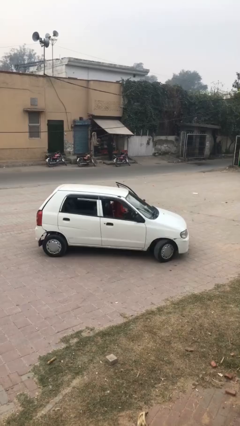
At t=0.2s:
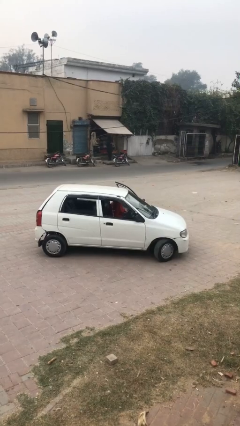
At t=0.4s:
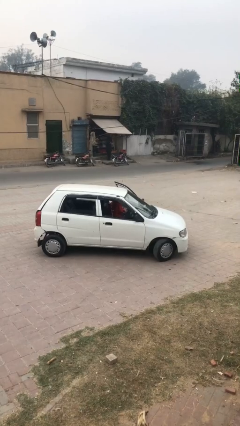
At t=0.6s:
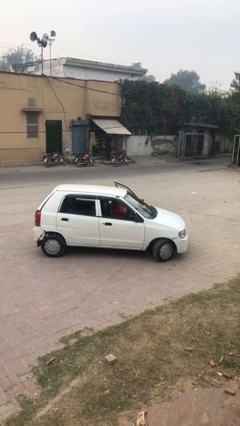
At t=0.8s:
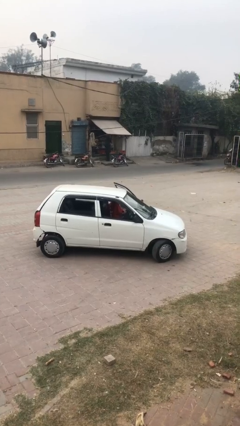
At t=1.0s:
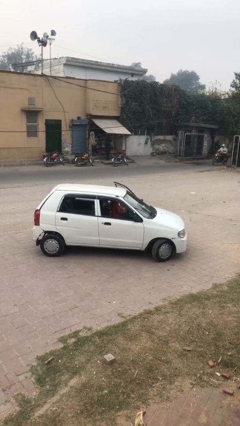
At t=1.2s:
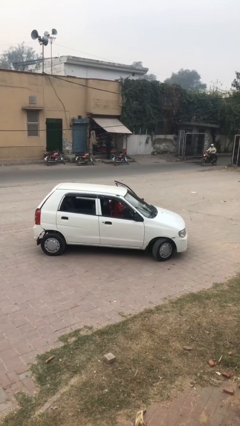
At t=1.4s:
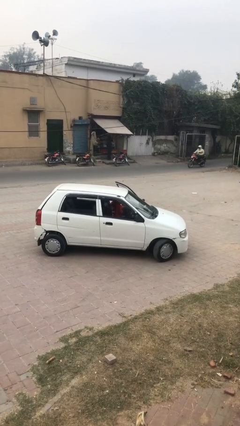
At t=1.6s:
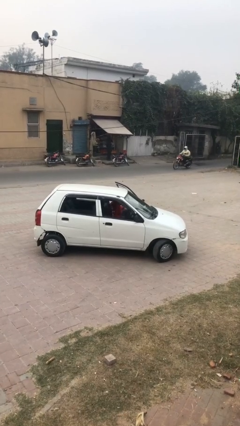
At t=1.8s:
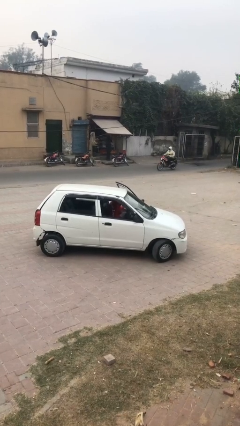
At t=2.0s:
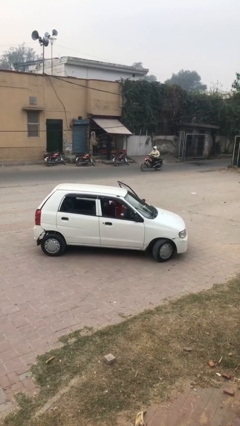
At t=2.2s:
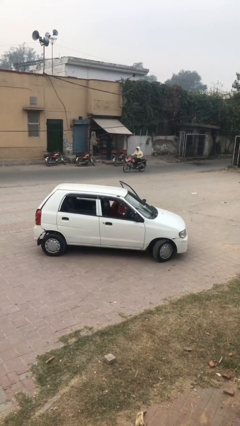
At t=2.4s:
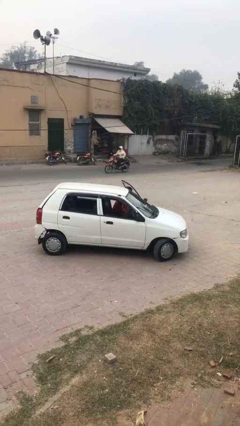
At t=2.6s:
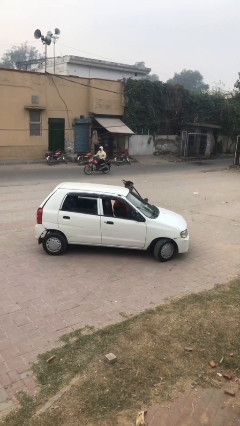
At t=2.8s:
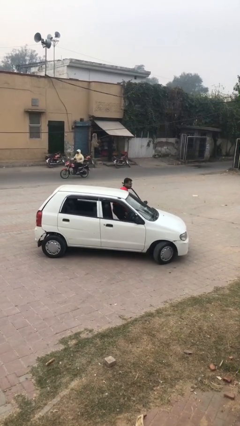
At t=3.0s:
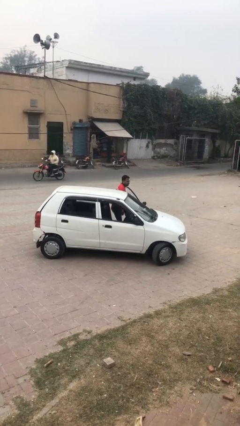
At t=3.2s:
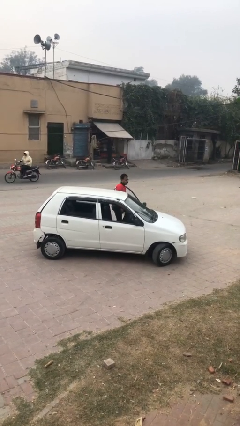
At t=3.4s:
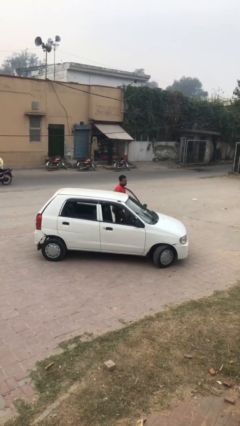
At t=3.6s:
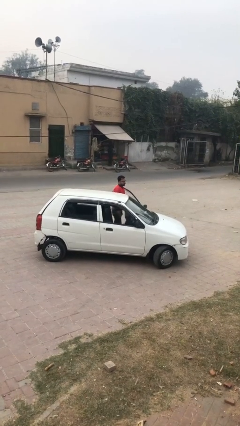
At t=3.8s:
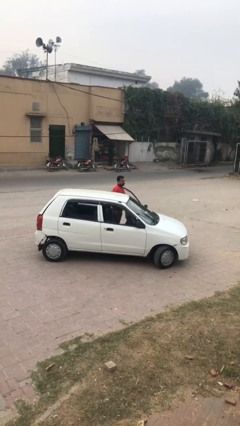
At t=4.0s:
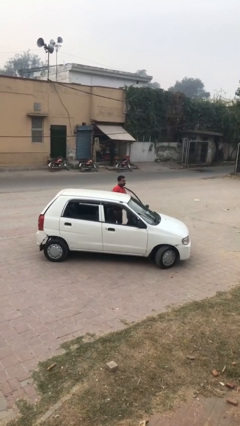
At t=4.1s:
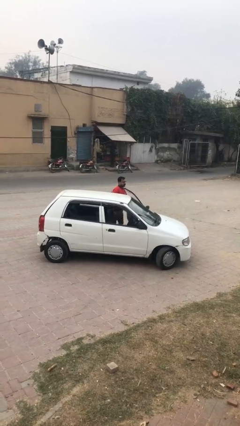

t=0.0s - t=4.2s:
person exits car

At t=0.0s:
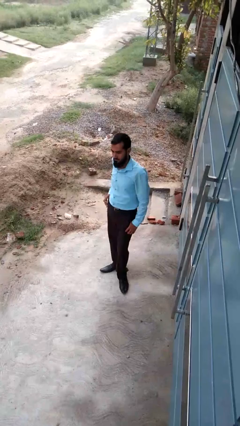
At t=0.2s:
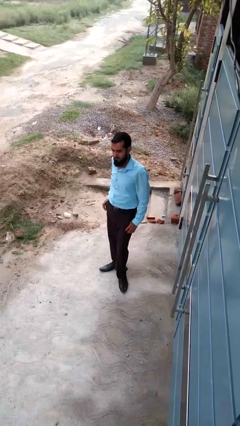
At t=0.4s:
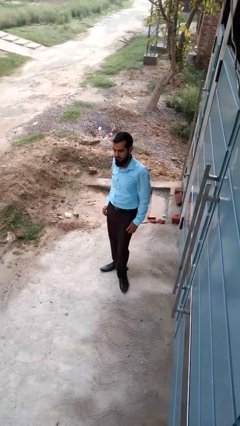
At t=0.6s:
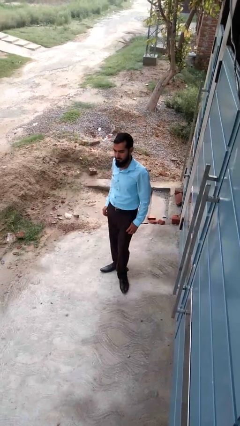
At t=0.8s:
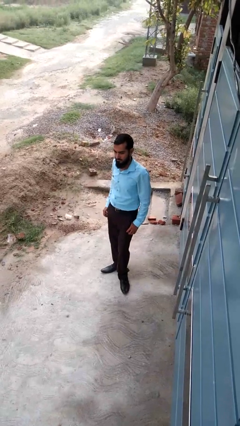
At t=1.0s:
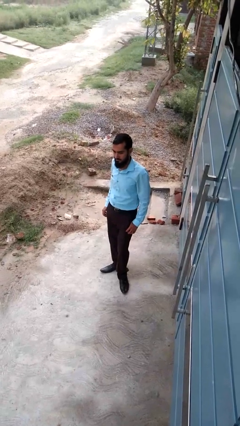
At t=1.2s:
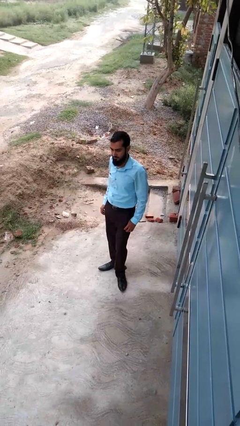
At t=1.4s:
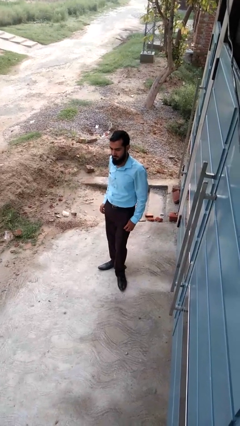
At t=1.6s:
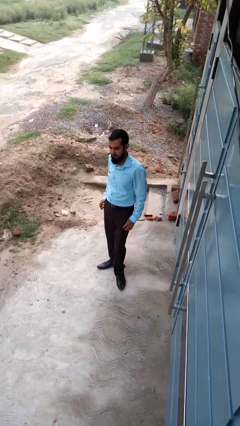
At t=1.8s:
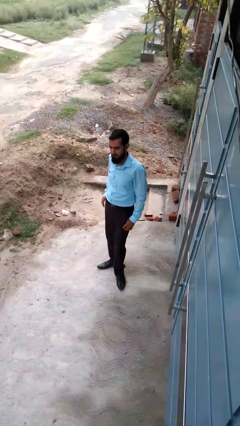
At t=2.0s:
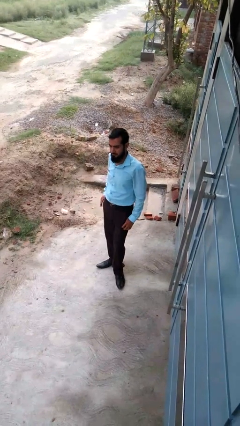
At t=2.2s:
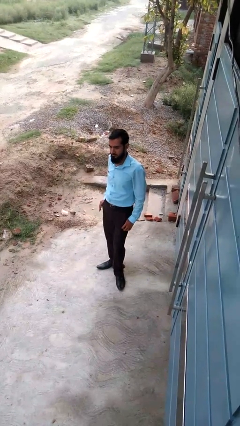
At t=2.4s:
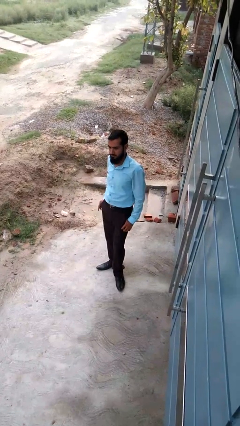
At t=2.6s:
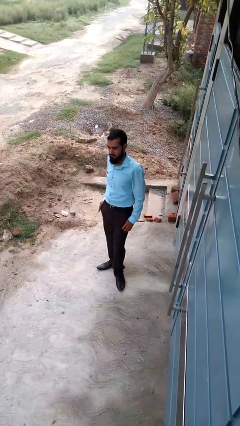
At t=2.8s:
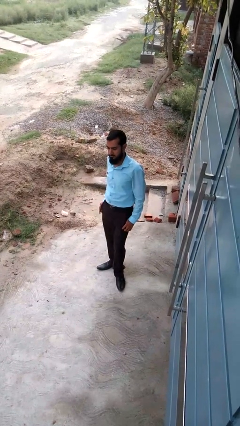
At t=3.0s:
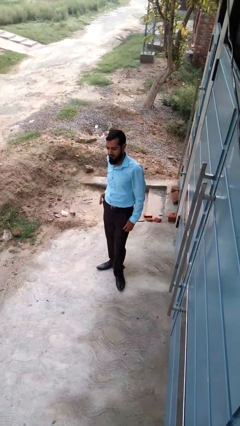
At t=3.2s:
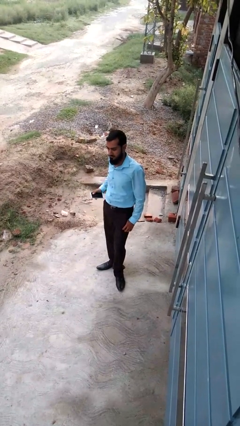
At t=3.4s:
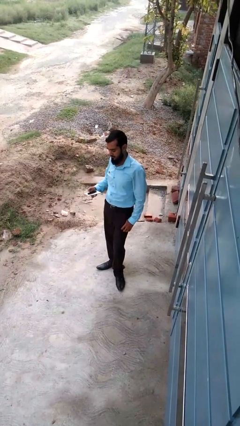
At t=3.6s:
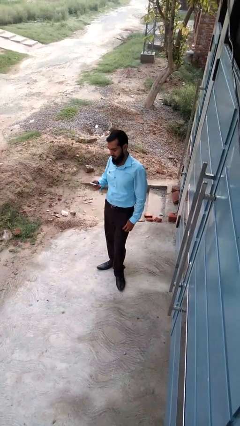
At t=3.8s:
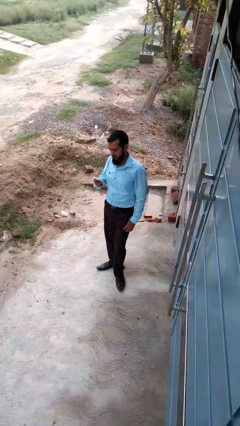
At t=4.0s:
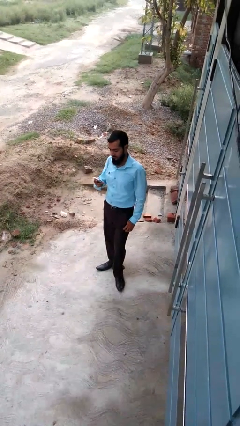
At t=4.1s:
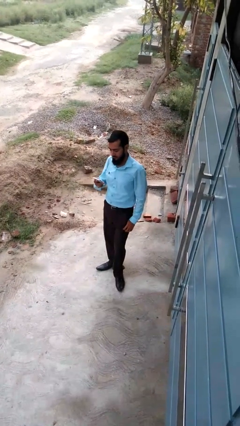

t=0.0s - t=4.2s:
person takes phone from pocket

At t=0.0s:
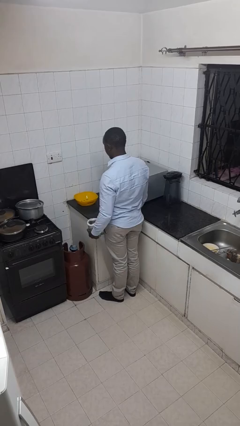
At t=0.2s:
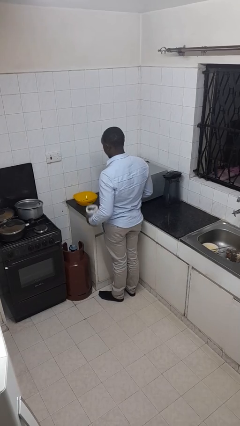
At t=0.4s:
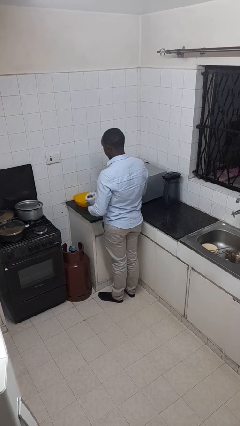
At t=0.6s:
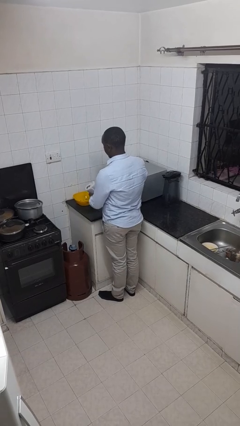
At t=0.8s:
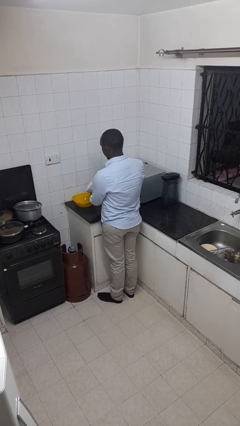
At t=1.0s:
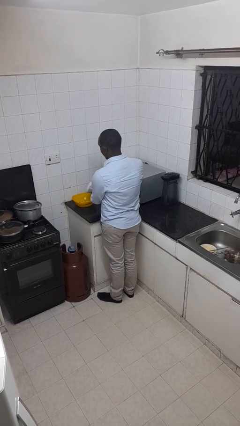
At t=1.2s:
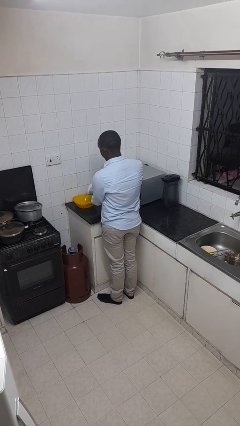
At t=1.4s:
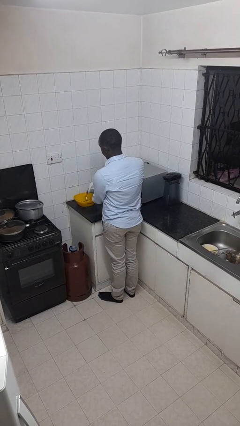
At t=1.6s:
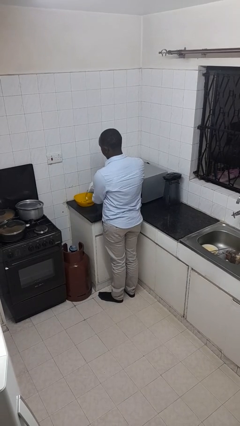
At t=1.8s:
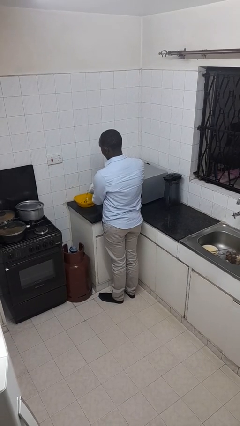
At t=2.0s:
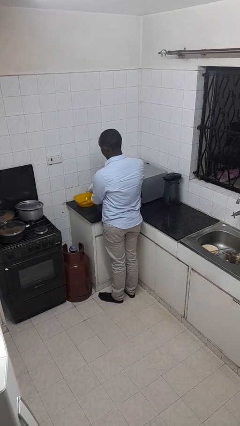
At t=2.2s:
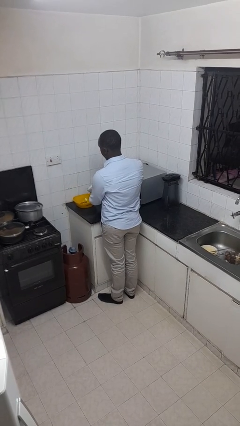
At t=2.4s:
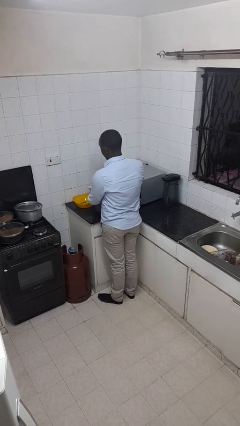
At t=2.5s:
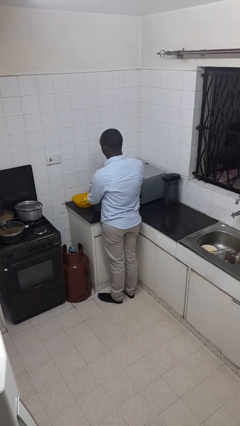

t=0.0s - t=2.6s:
person pours into bowl

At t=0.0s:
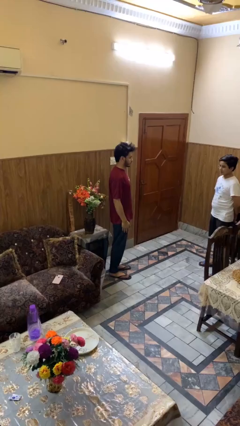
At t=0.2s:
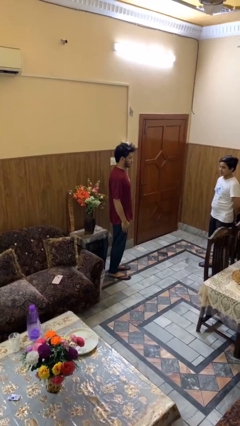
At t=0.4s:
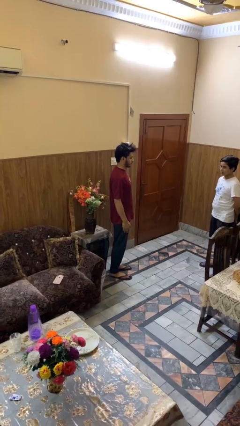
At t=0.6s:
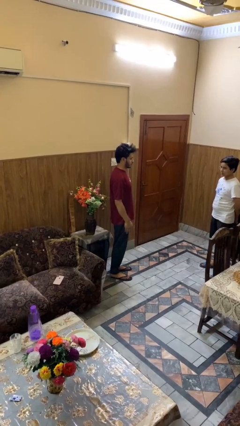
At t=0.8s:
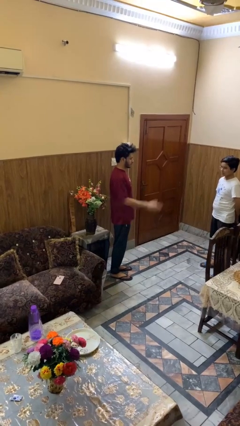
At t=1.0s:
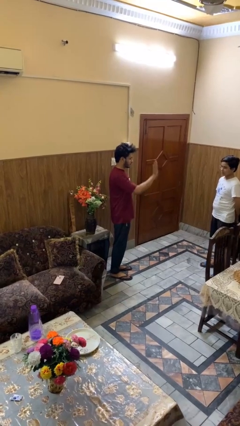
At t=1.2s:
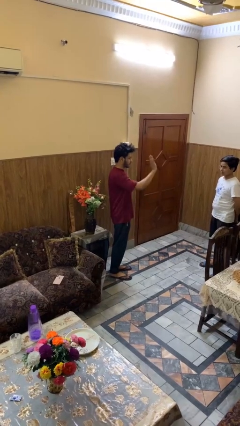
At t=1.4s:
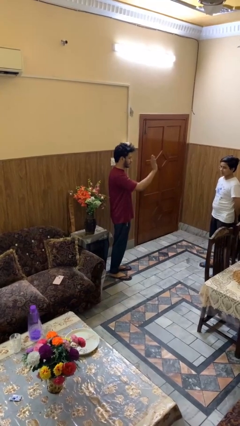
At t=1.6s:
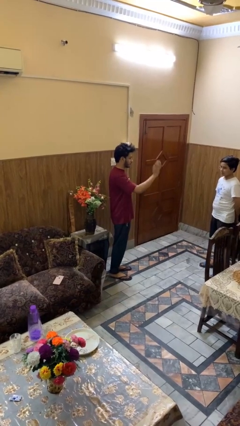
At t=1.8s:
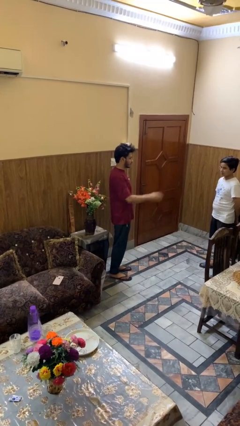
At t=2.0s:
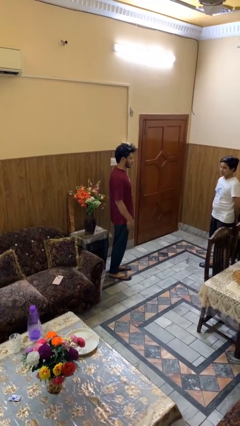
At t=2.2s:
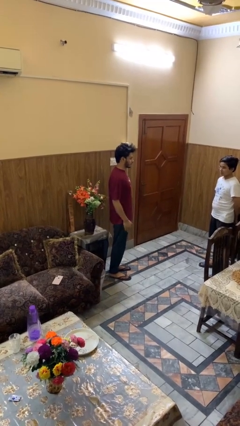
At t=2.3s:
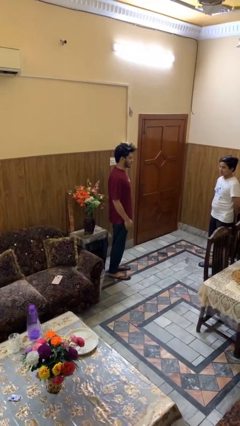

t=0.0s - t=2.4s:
person waves at person

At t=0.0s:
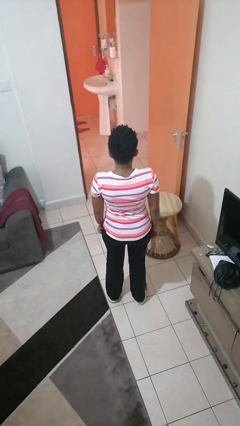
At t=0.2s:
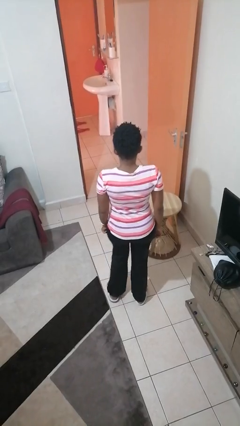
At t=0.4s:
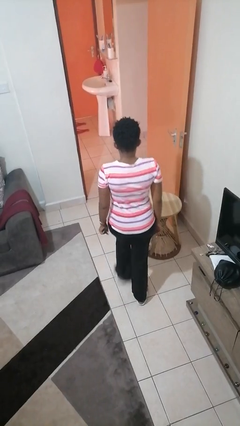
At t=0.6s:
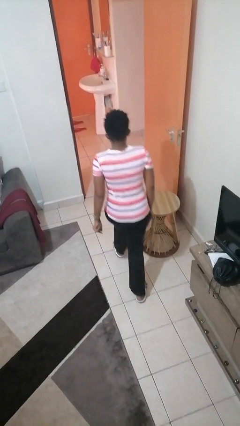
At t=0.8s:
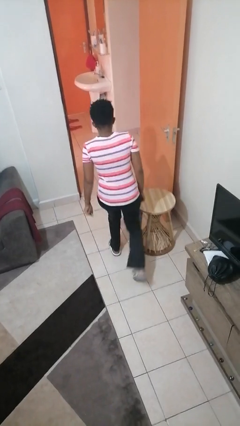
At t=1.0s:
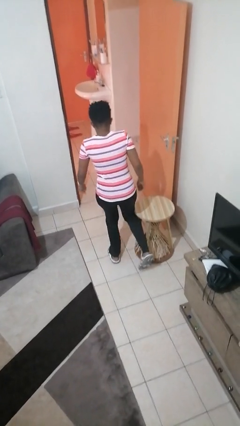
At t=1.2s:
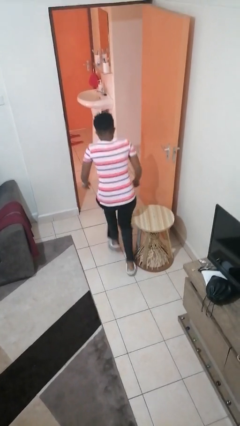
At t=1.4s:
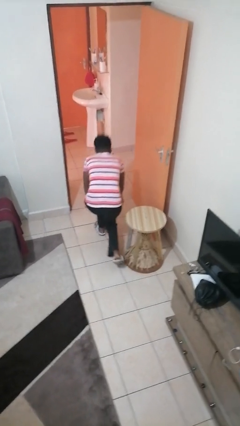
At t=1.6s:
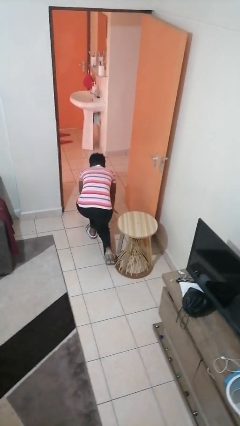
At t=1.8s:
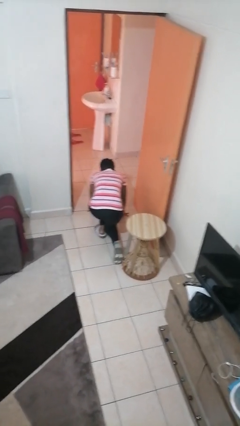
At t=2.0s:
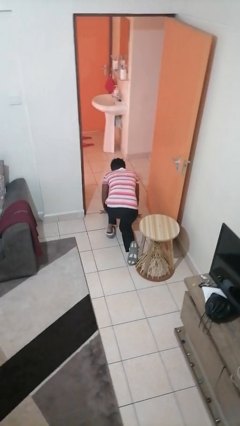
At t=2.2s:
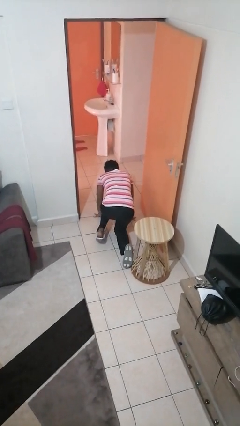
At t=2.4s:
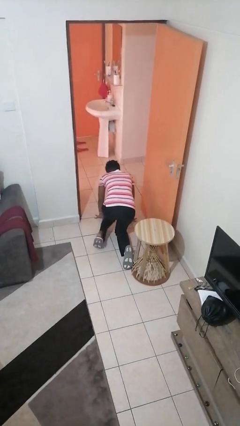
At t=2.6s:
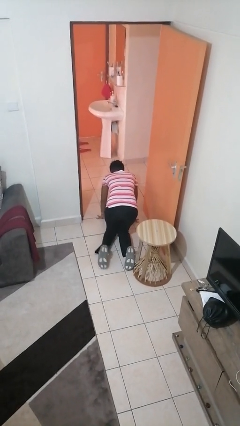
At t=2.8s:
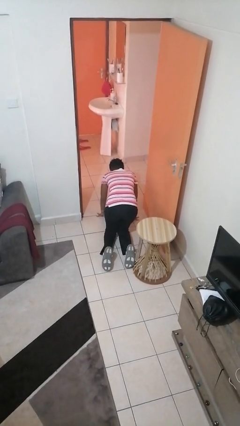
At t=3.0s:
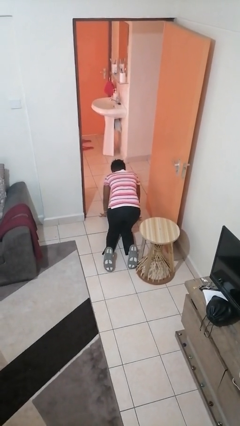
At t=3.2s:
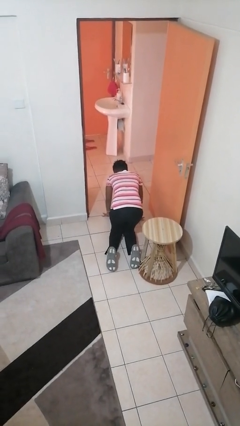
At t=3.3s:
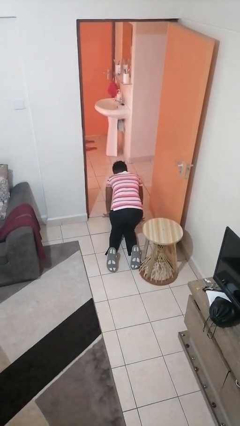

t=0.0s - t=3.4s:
person trips on object on floor
